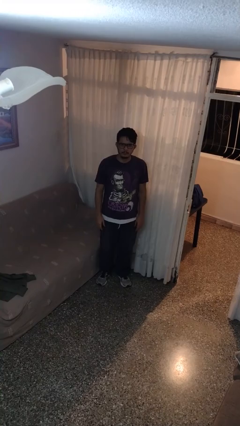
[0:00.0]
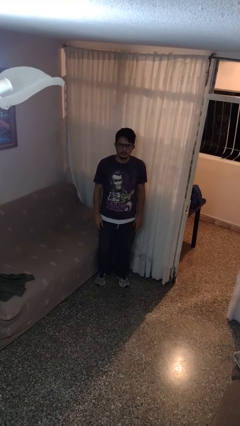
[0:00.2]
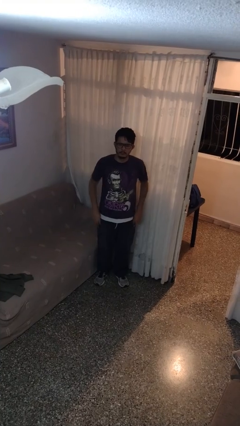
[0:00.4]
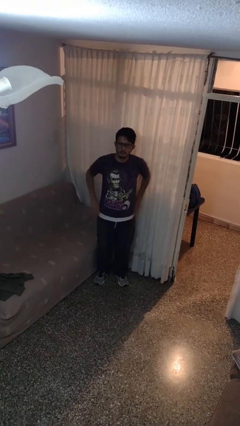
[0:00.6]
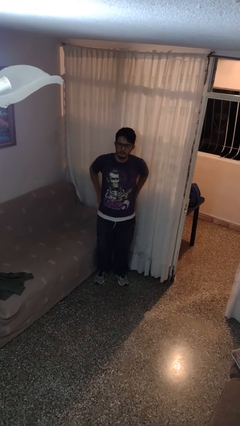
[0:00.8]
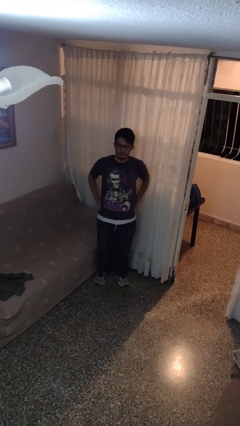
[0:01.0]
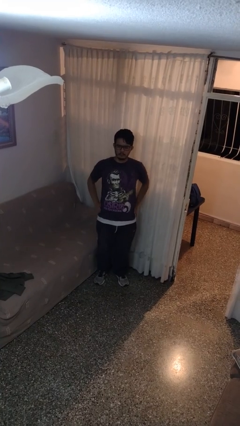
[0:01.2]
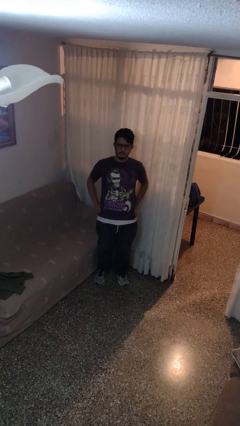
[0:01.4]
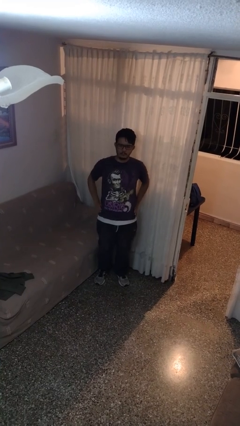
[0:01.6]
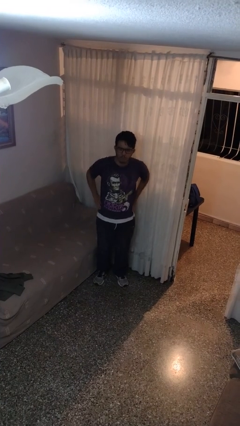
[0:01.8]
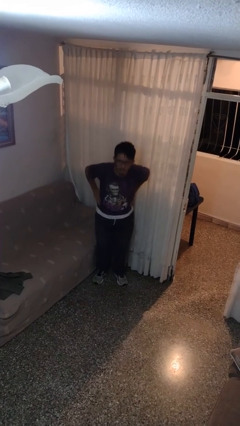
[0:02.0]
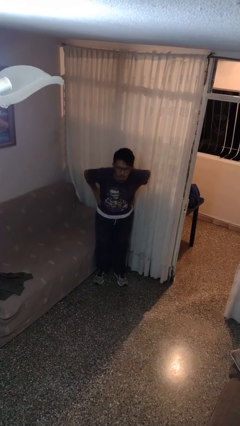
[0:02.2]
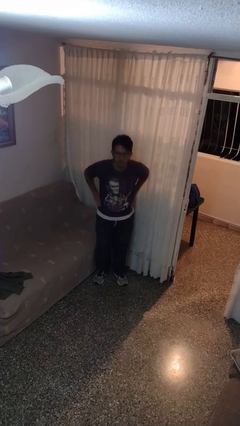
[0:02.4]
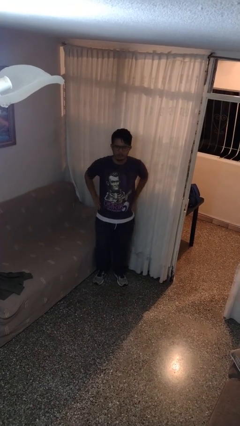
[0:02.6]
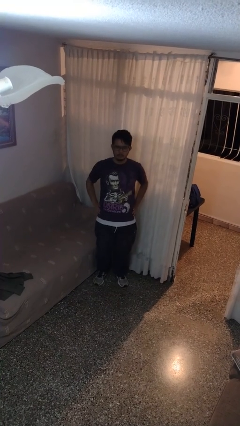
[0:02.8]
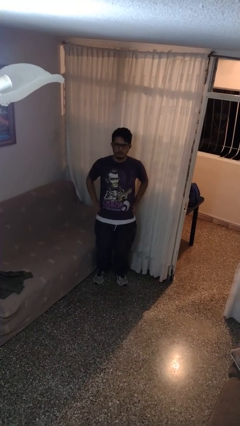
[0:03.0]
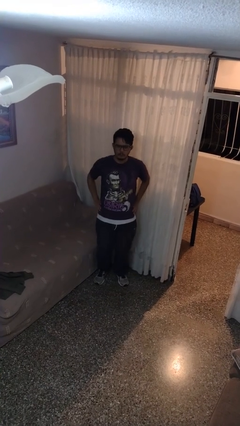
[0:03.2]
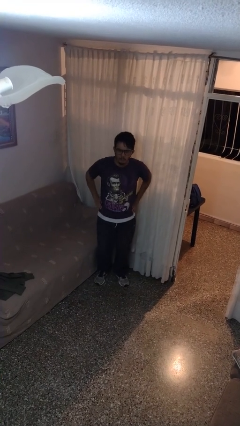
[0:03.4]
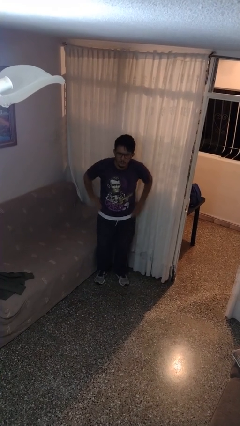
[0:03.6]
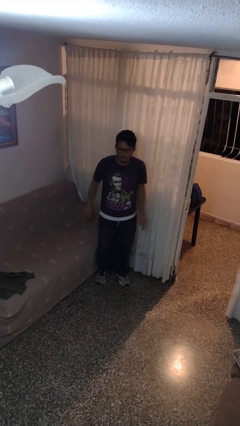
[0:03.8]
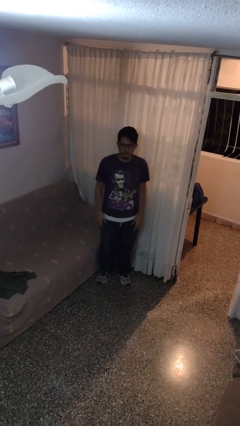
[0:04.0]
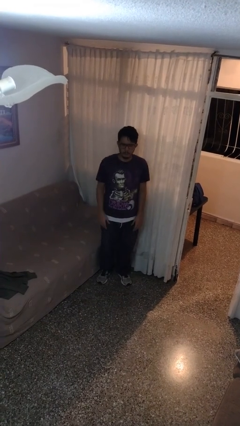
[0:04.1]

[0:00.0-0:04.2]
person wiggles hips

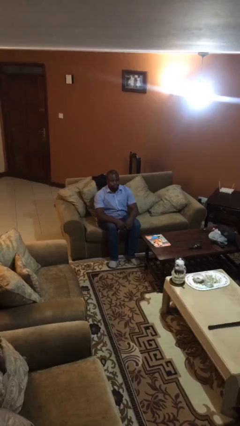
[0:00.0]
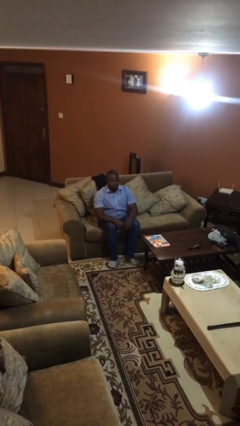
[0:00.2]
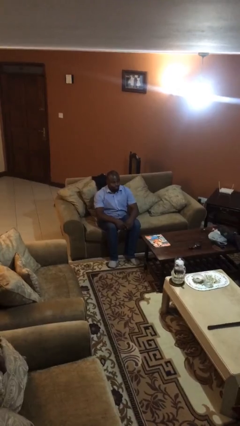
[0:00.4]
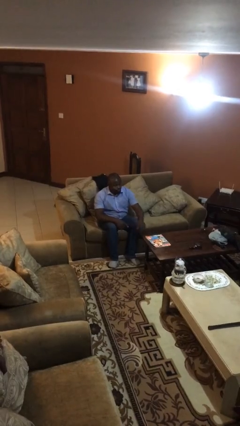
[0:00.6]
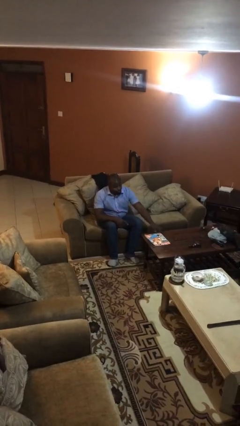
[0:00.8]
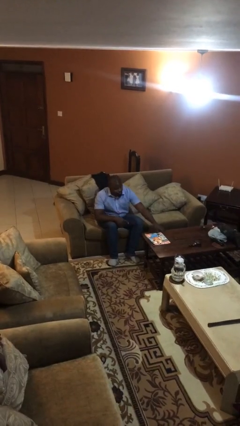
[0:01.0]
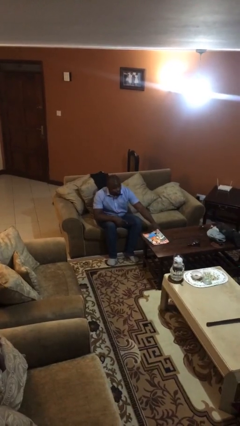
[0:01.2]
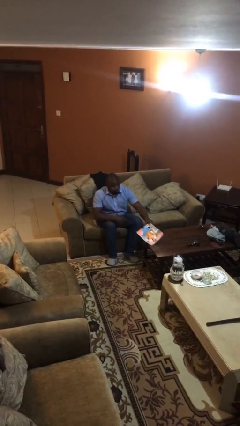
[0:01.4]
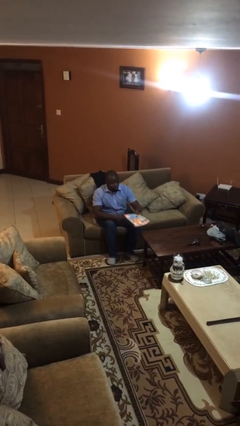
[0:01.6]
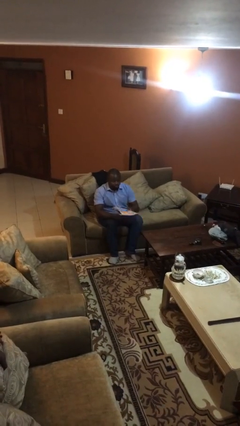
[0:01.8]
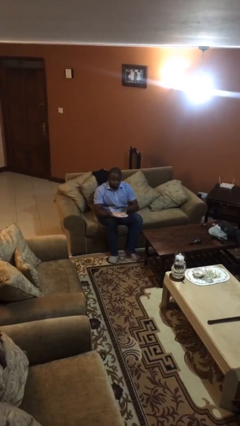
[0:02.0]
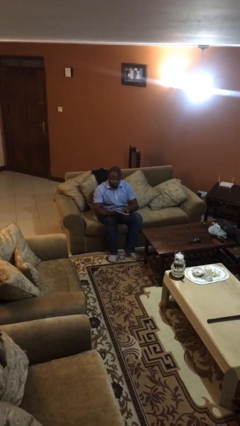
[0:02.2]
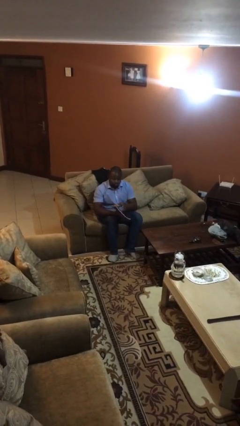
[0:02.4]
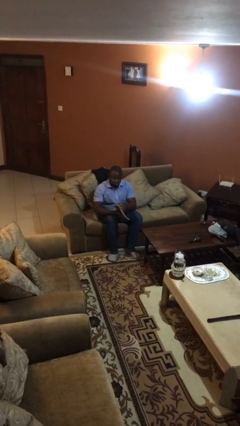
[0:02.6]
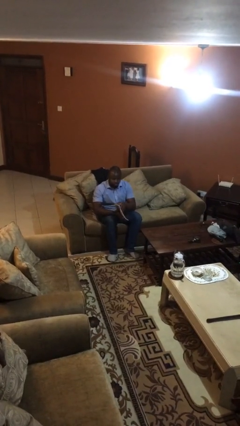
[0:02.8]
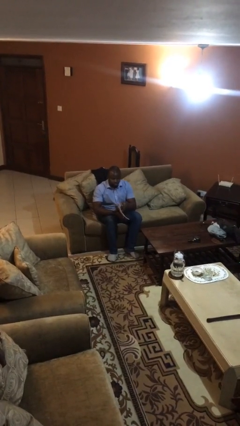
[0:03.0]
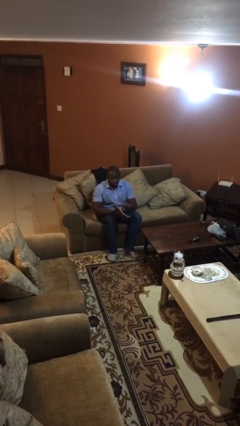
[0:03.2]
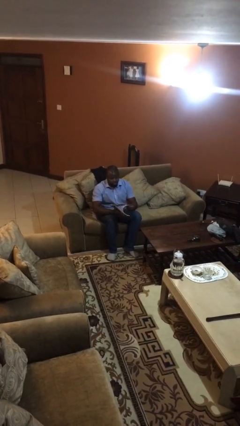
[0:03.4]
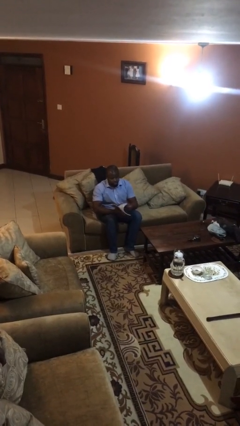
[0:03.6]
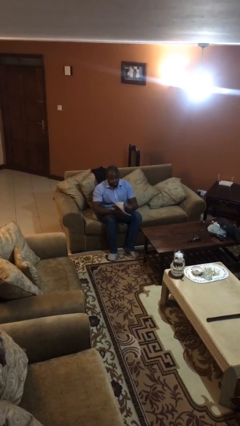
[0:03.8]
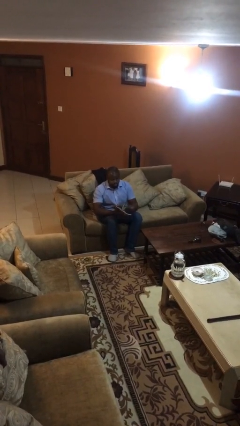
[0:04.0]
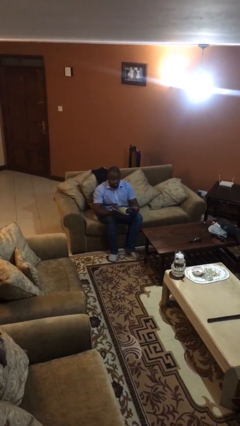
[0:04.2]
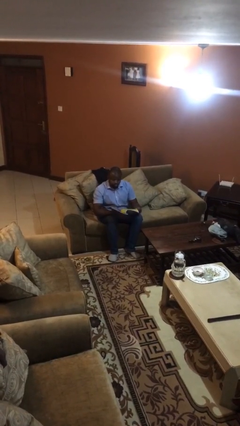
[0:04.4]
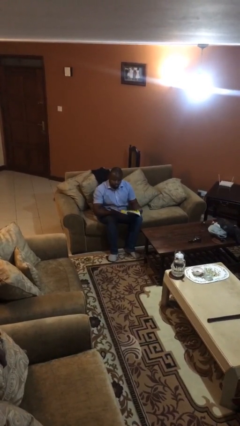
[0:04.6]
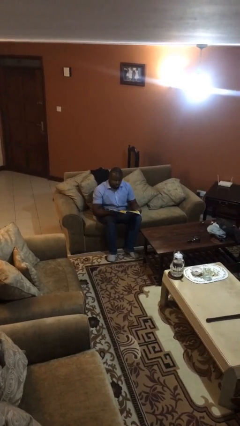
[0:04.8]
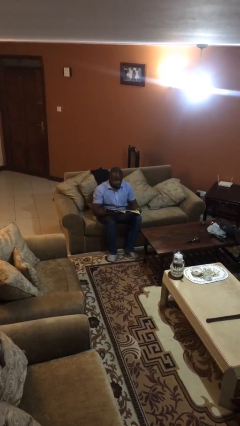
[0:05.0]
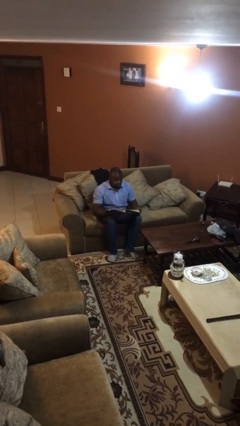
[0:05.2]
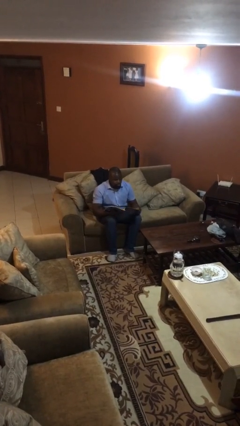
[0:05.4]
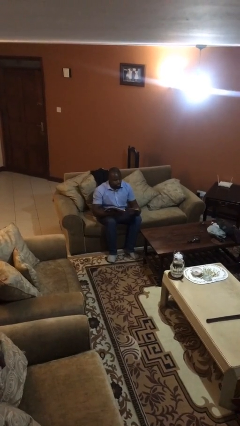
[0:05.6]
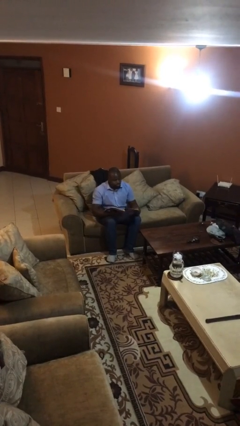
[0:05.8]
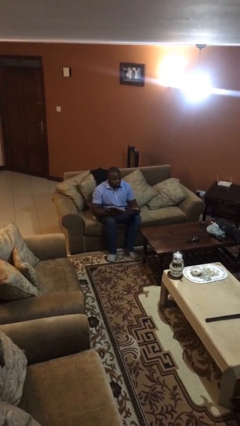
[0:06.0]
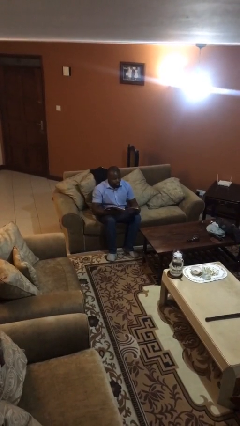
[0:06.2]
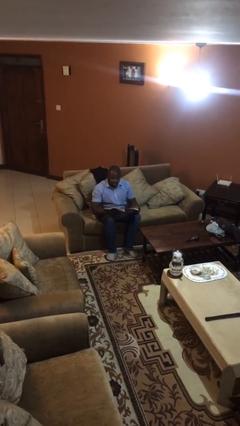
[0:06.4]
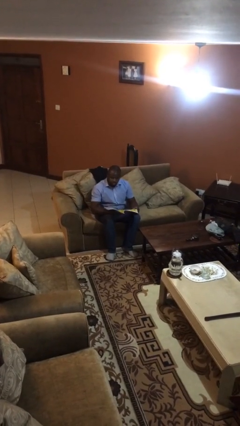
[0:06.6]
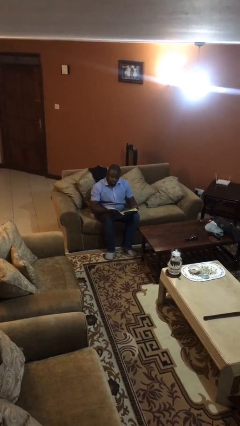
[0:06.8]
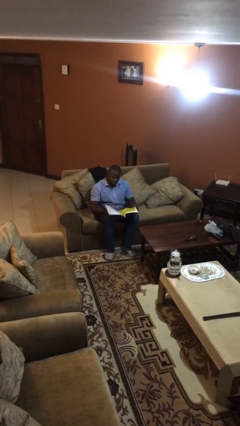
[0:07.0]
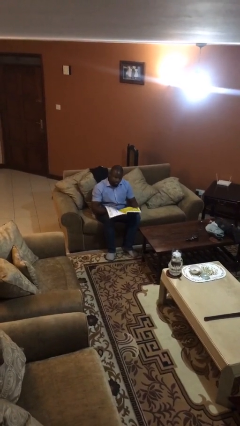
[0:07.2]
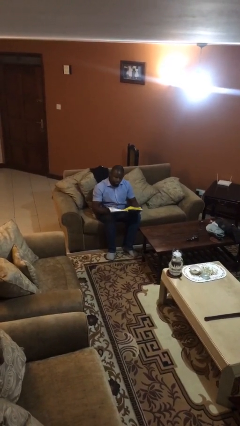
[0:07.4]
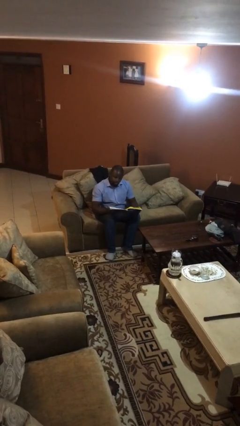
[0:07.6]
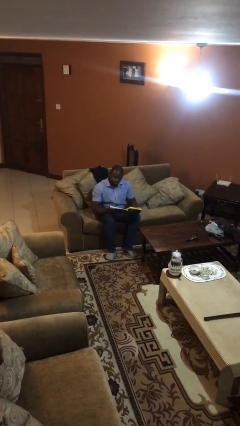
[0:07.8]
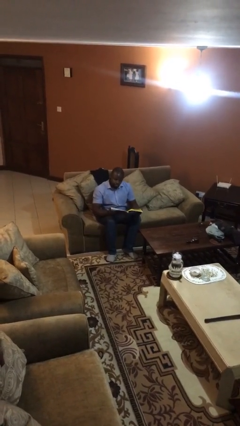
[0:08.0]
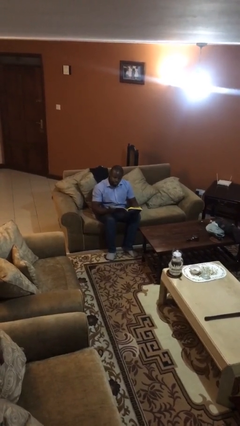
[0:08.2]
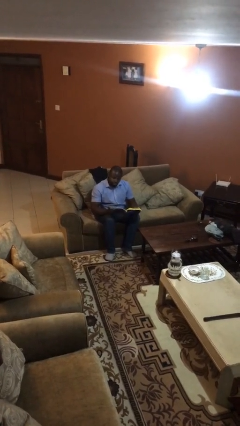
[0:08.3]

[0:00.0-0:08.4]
person reads document

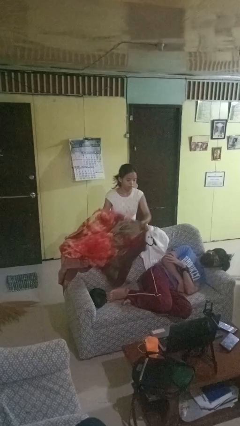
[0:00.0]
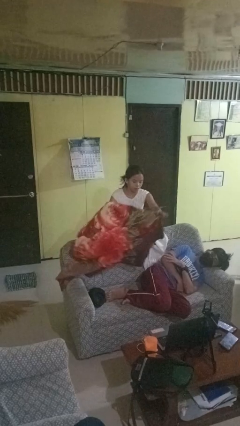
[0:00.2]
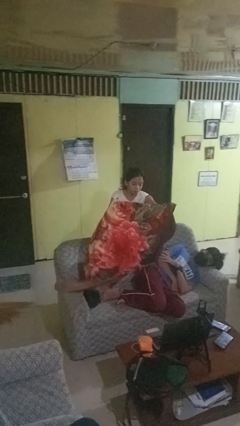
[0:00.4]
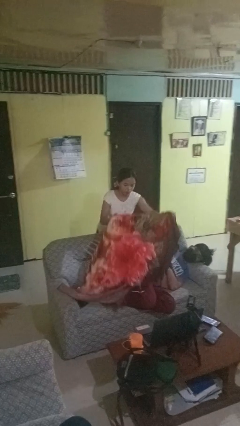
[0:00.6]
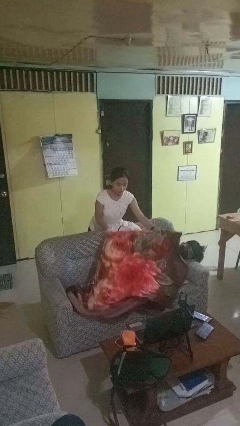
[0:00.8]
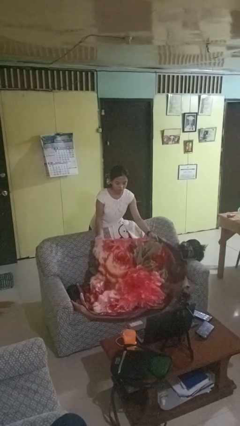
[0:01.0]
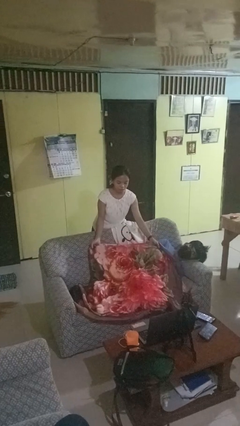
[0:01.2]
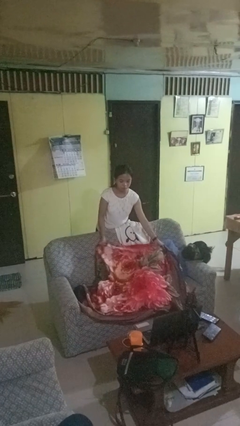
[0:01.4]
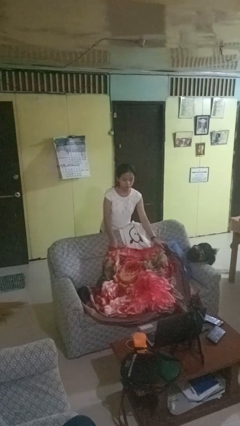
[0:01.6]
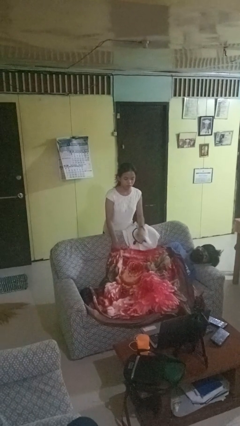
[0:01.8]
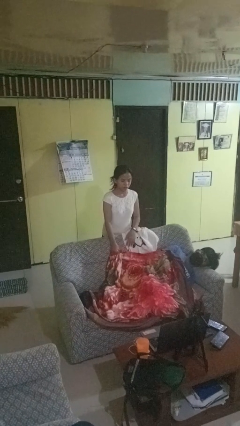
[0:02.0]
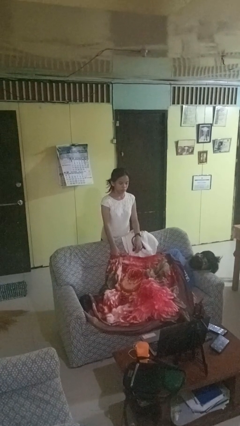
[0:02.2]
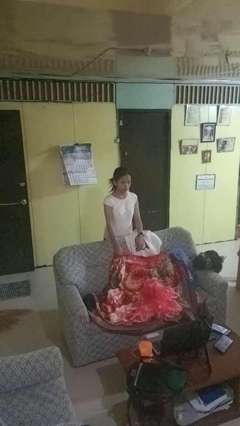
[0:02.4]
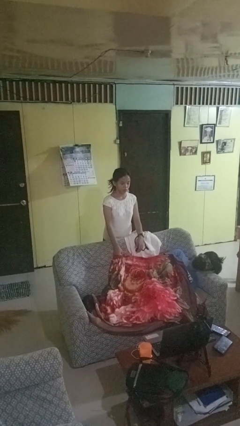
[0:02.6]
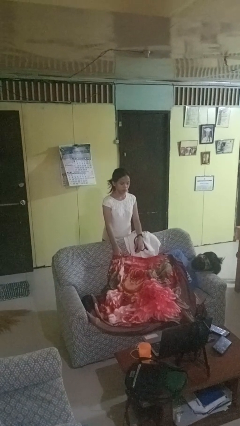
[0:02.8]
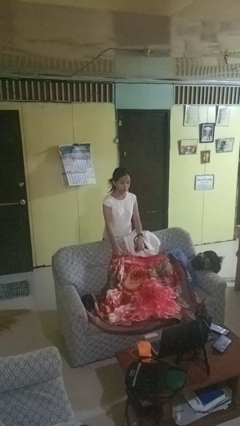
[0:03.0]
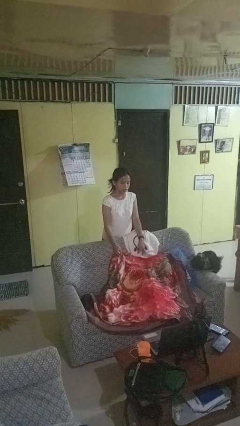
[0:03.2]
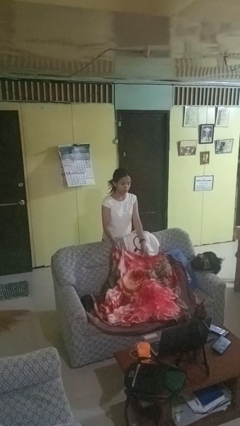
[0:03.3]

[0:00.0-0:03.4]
person covers friend with blanket

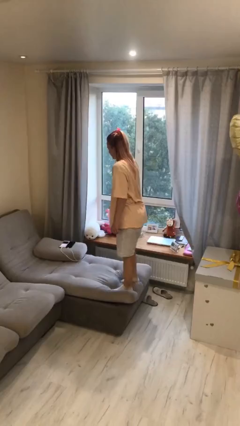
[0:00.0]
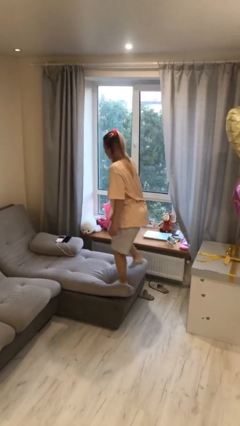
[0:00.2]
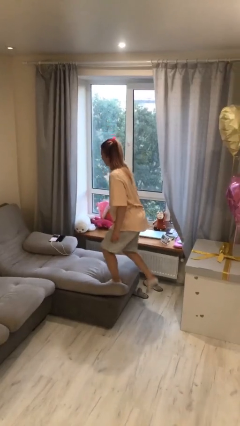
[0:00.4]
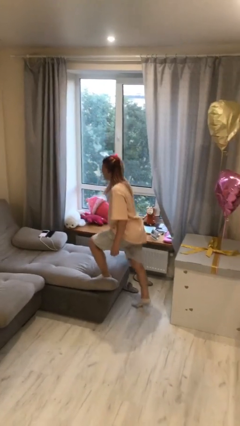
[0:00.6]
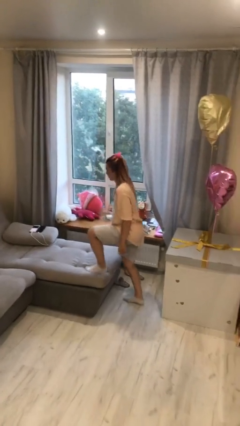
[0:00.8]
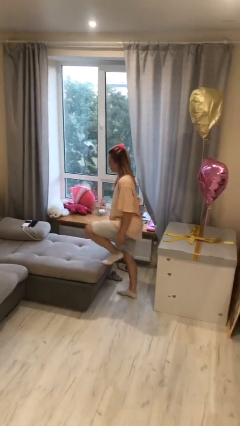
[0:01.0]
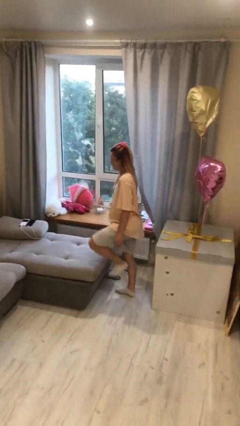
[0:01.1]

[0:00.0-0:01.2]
person climbs off couch
